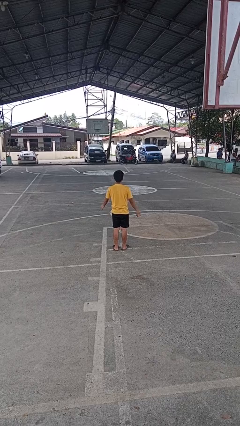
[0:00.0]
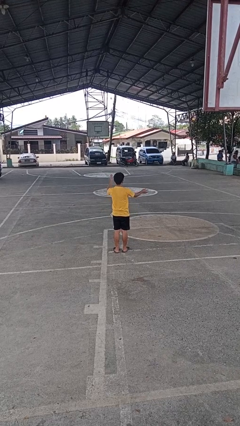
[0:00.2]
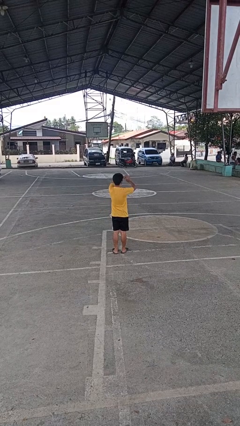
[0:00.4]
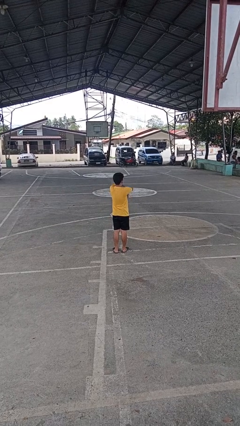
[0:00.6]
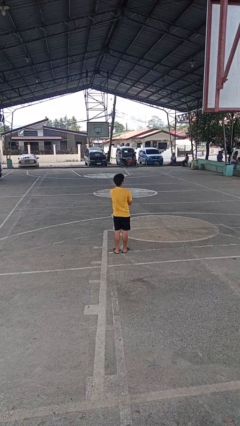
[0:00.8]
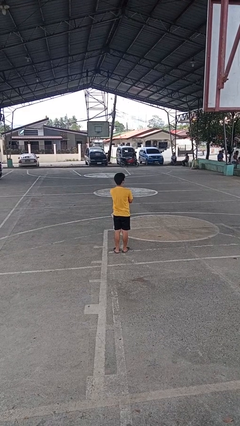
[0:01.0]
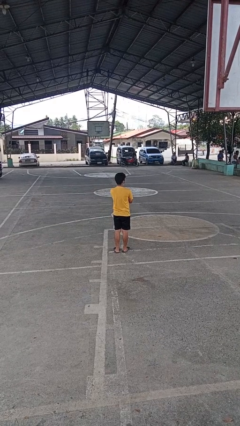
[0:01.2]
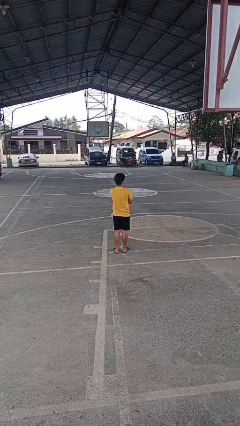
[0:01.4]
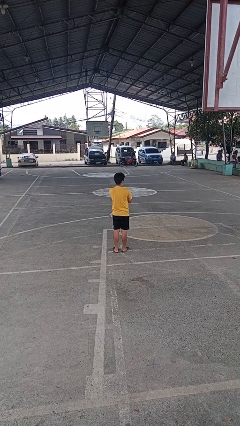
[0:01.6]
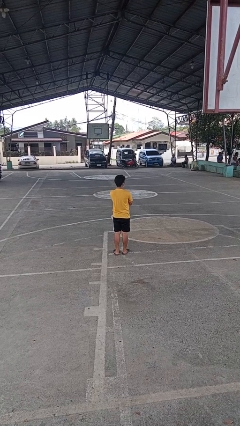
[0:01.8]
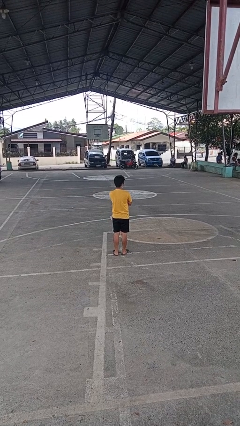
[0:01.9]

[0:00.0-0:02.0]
person crosses arms

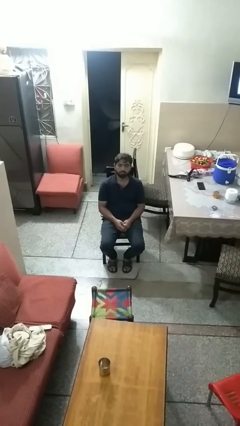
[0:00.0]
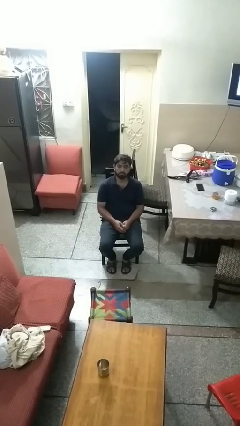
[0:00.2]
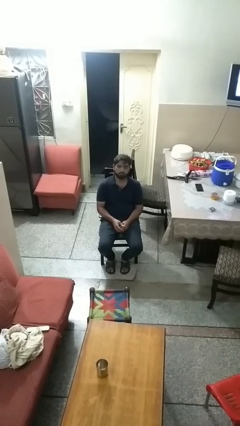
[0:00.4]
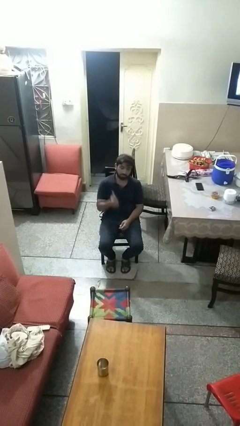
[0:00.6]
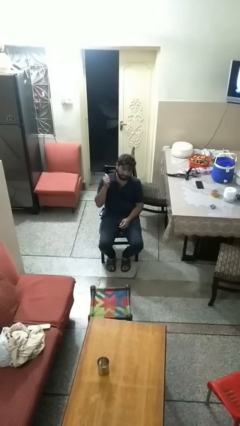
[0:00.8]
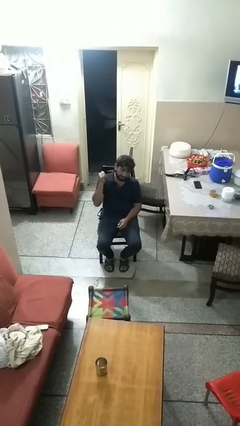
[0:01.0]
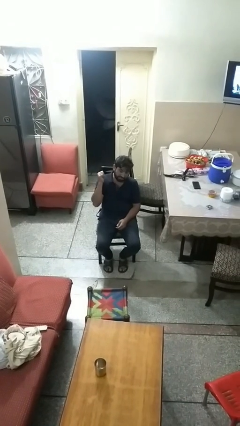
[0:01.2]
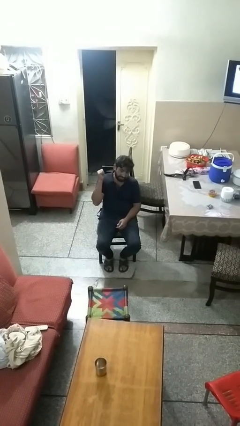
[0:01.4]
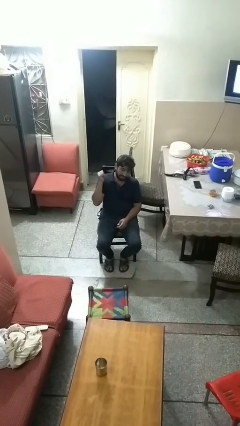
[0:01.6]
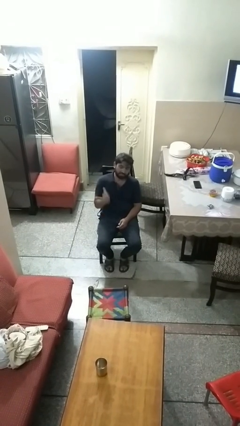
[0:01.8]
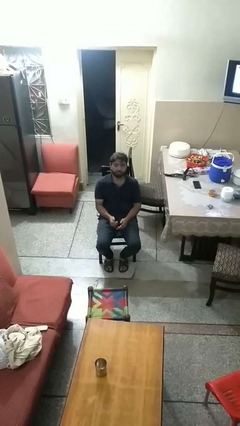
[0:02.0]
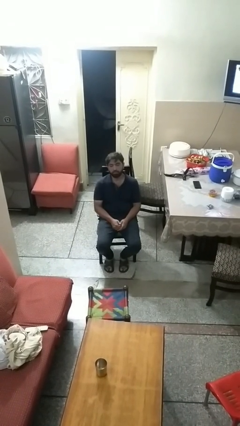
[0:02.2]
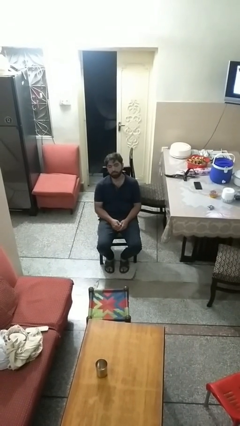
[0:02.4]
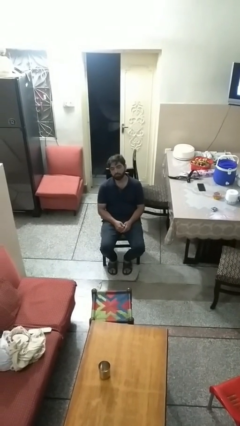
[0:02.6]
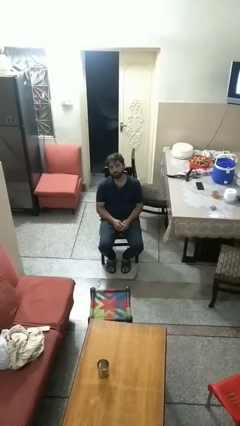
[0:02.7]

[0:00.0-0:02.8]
person gestures behind me

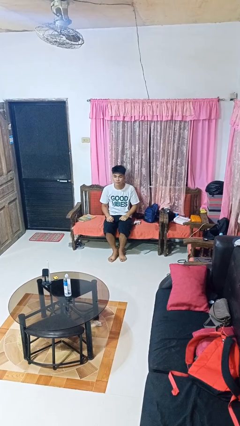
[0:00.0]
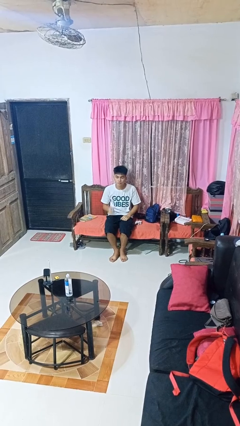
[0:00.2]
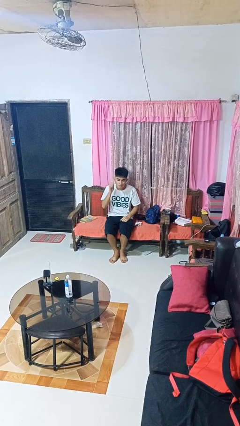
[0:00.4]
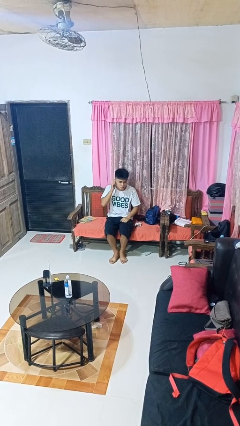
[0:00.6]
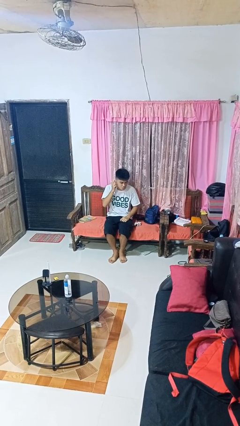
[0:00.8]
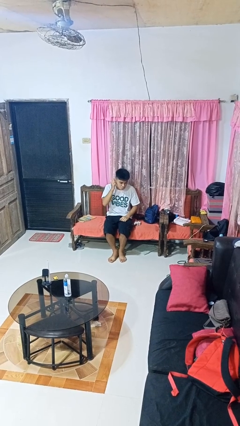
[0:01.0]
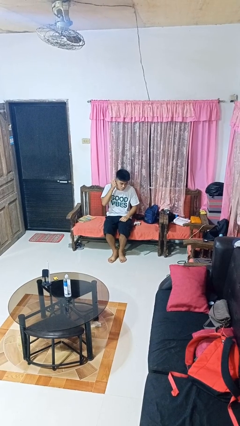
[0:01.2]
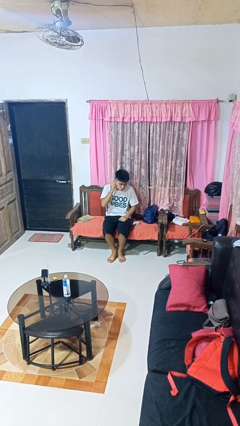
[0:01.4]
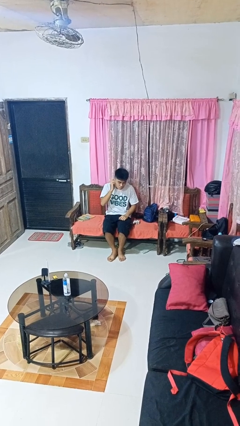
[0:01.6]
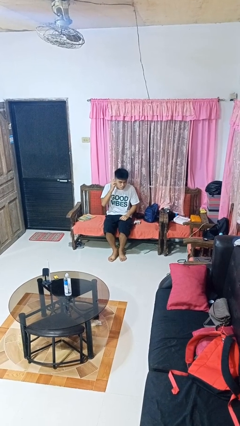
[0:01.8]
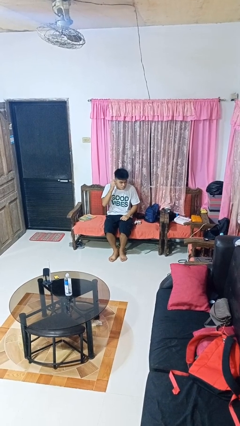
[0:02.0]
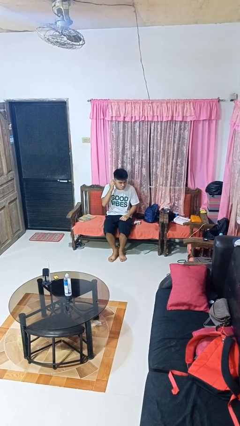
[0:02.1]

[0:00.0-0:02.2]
person touches earlobe

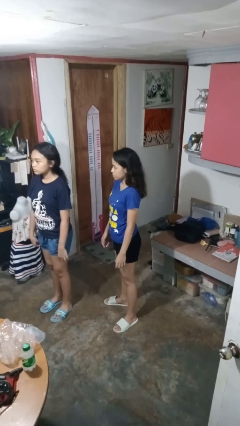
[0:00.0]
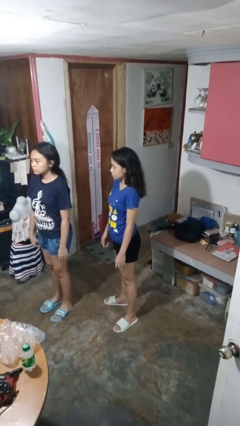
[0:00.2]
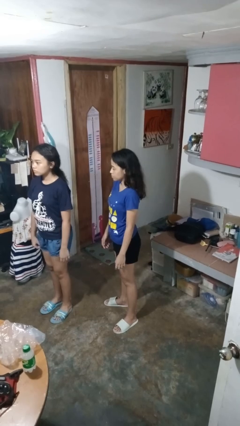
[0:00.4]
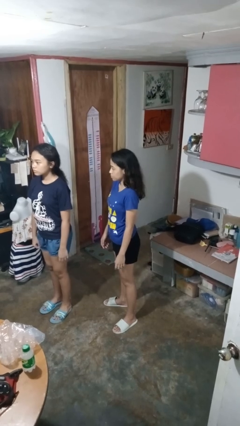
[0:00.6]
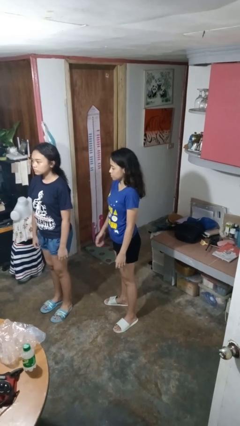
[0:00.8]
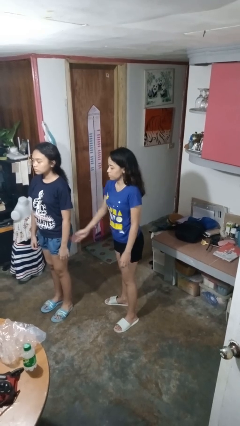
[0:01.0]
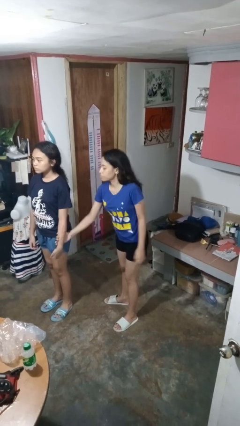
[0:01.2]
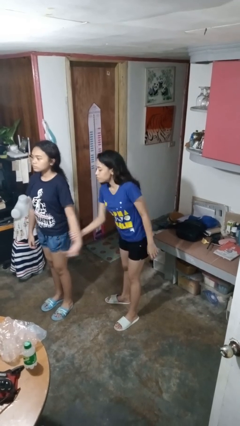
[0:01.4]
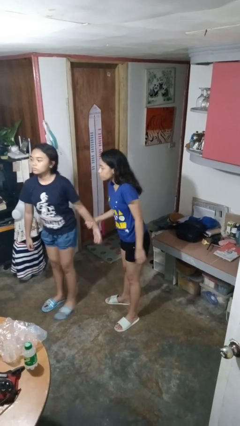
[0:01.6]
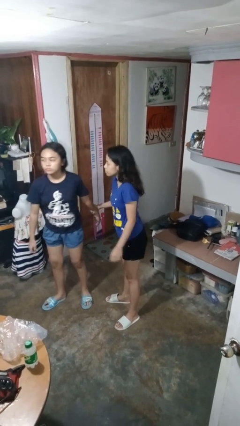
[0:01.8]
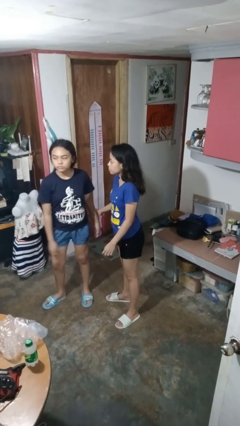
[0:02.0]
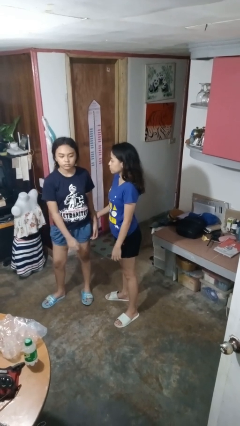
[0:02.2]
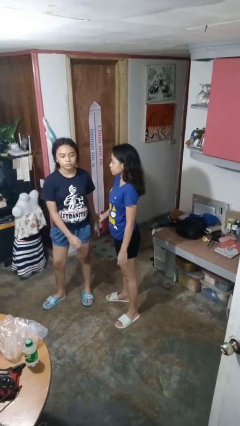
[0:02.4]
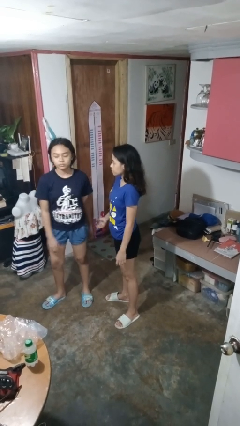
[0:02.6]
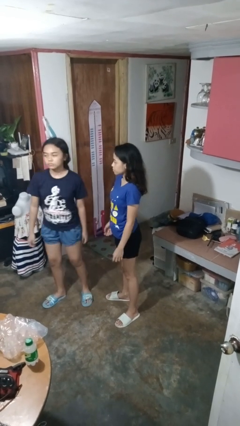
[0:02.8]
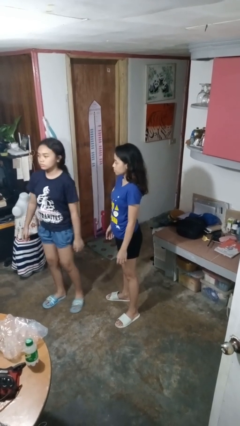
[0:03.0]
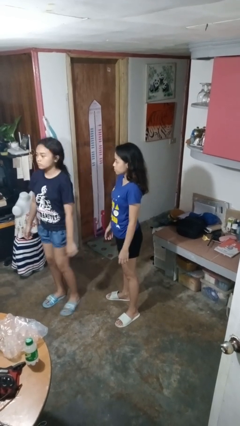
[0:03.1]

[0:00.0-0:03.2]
person grabs person by forearm

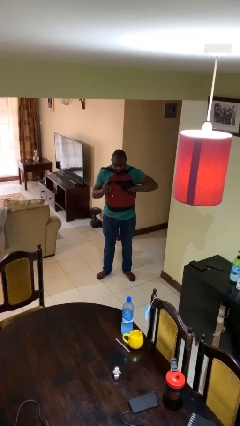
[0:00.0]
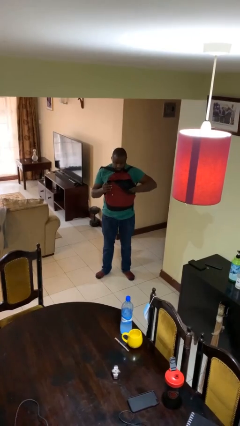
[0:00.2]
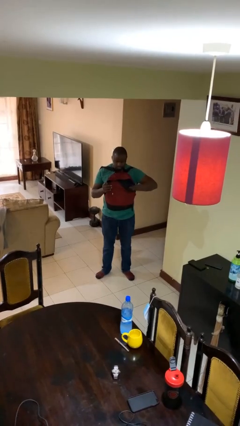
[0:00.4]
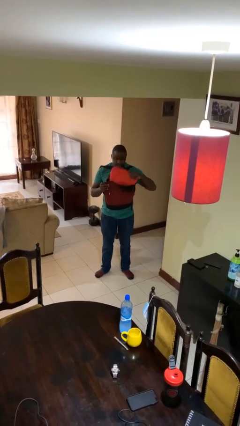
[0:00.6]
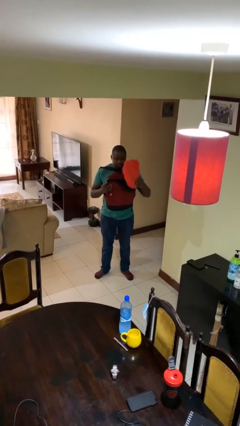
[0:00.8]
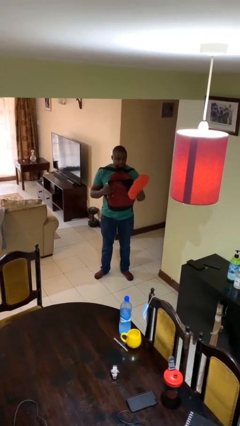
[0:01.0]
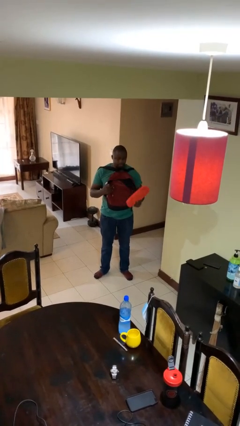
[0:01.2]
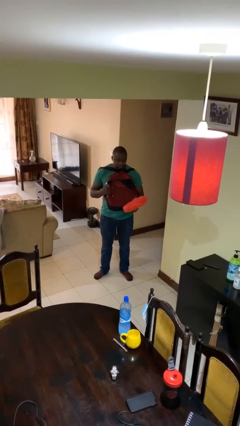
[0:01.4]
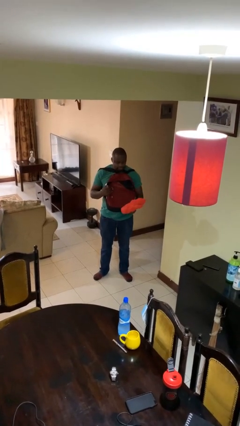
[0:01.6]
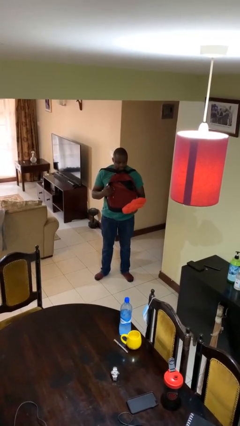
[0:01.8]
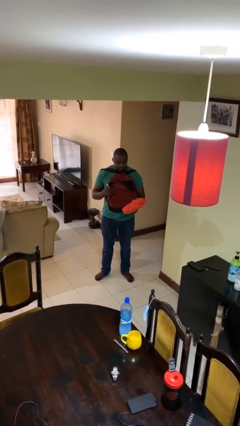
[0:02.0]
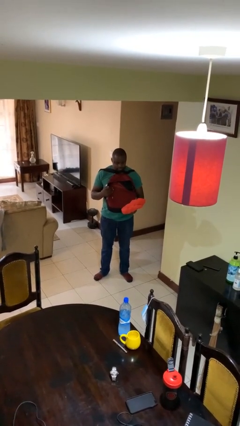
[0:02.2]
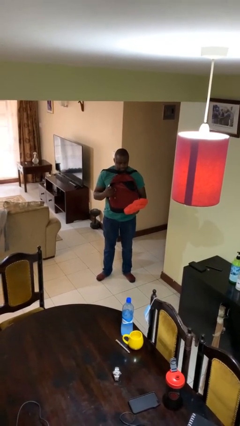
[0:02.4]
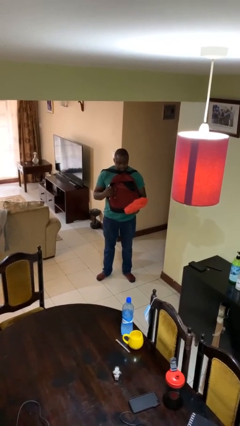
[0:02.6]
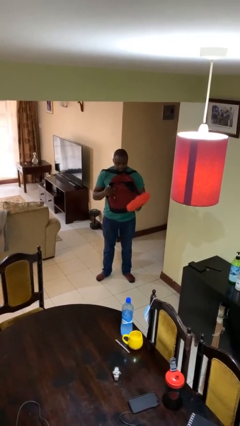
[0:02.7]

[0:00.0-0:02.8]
person takes object from backpack

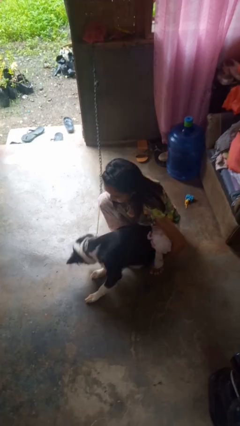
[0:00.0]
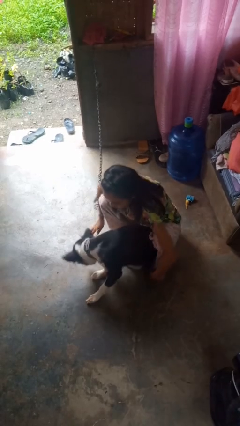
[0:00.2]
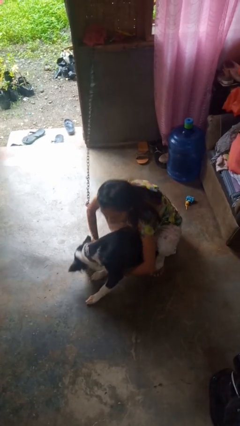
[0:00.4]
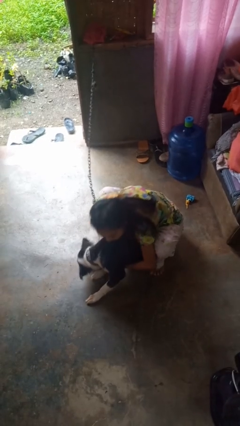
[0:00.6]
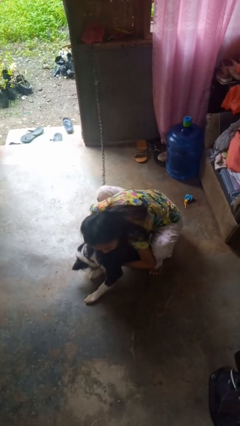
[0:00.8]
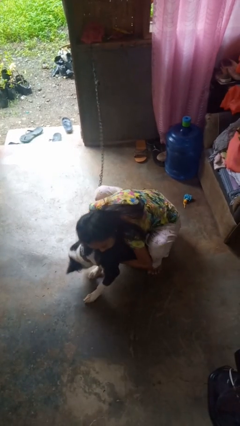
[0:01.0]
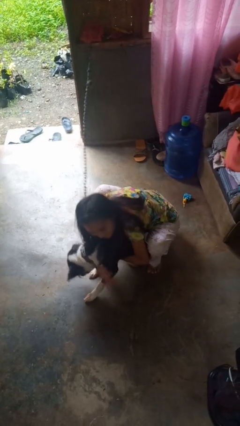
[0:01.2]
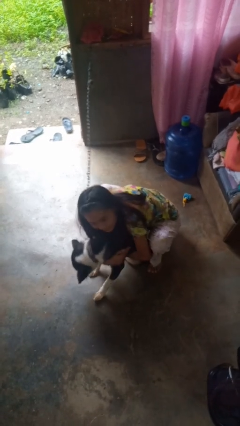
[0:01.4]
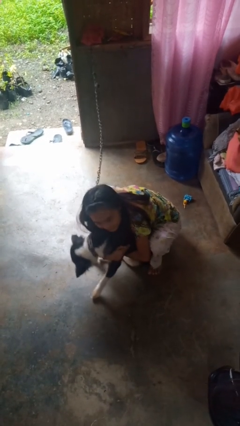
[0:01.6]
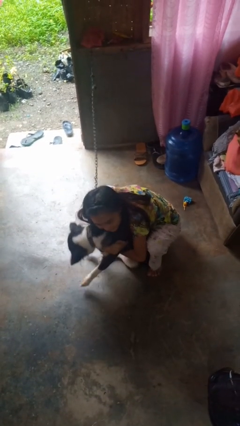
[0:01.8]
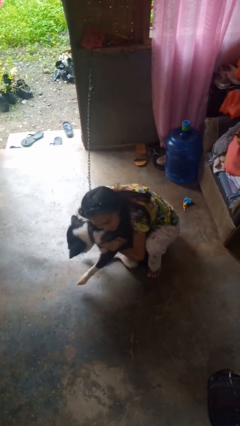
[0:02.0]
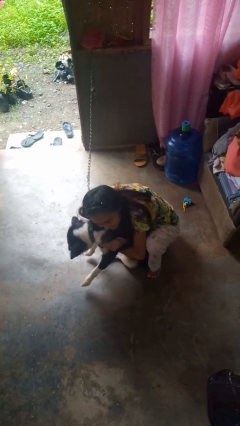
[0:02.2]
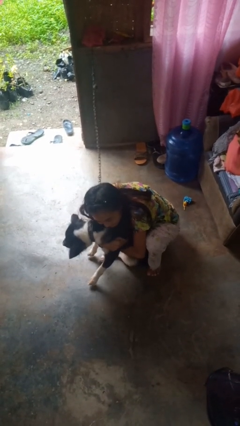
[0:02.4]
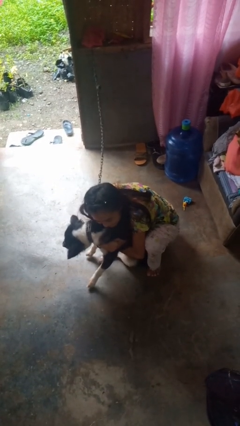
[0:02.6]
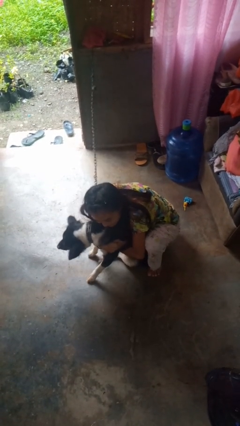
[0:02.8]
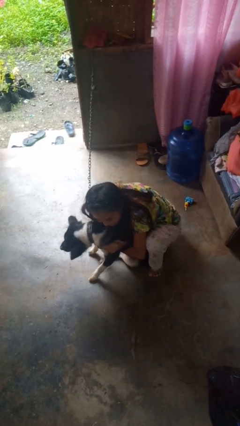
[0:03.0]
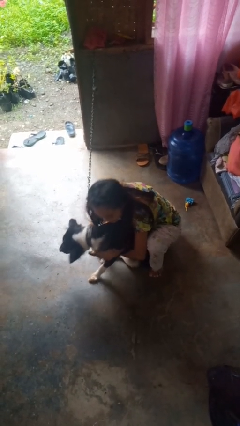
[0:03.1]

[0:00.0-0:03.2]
person hugs dog

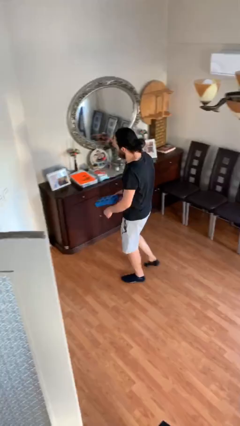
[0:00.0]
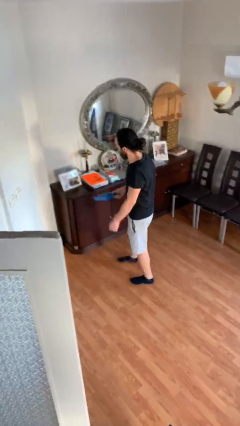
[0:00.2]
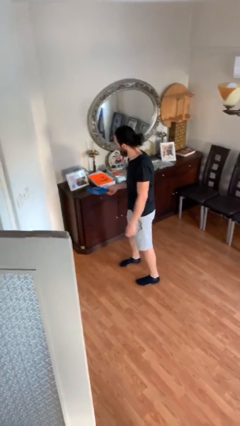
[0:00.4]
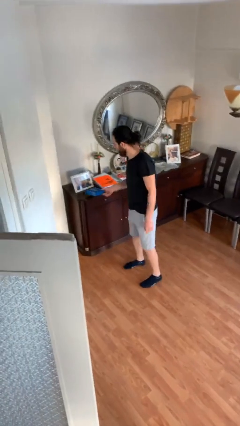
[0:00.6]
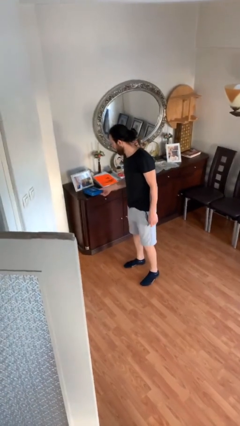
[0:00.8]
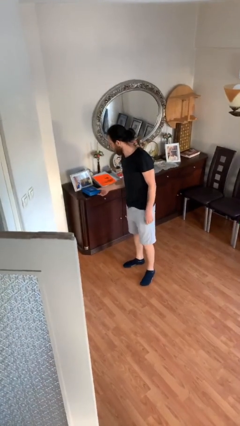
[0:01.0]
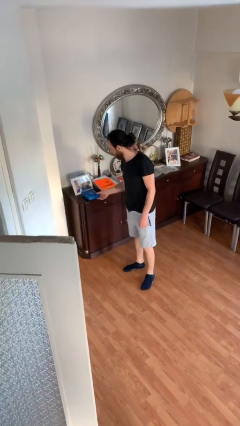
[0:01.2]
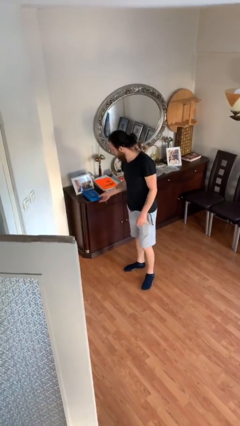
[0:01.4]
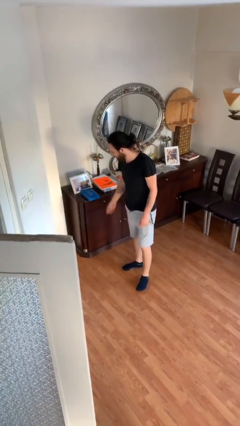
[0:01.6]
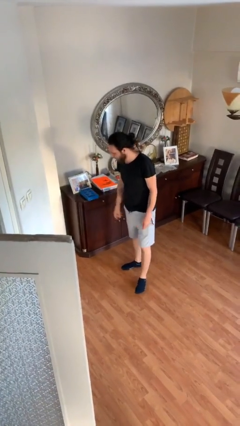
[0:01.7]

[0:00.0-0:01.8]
person puts down object on table
